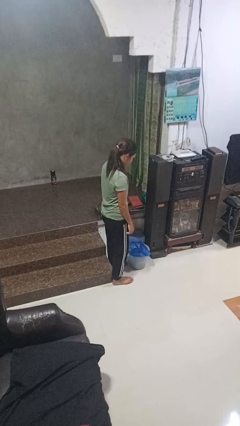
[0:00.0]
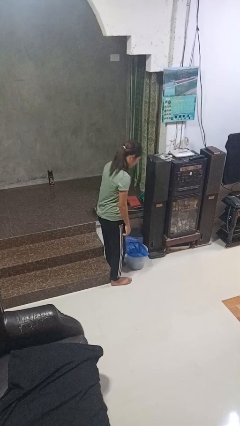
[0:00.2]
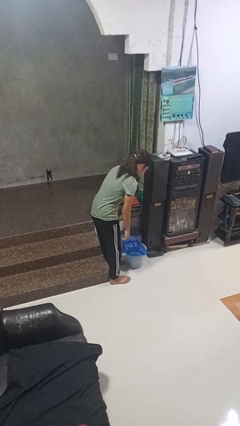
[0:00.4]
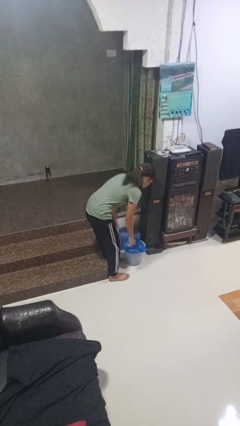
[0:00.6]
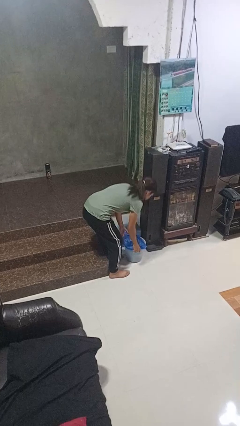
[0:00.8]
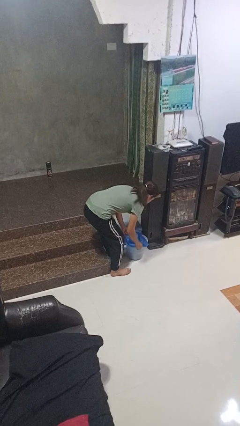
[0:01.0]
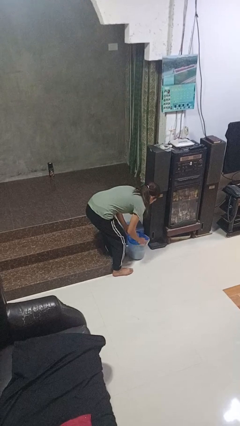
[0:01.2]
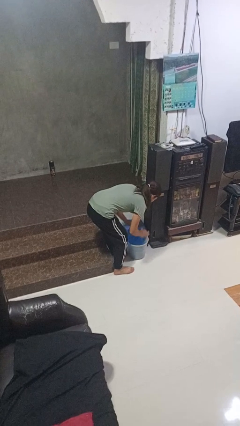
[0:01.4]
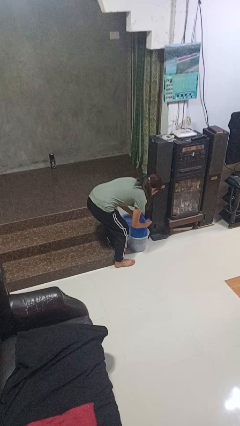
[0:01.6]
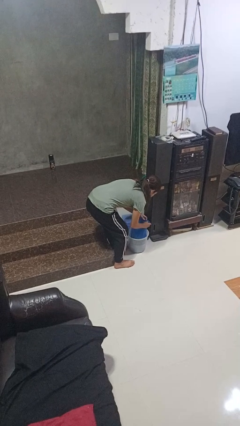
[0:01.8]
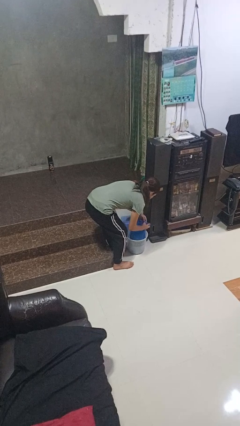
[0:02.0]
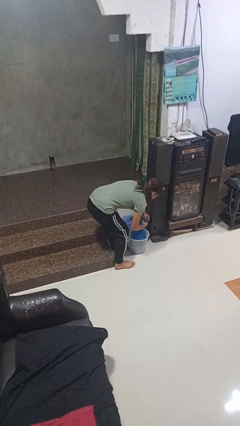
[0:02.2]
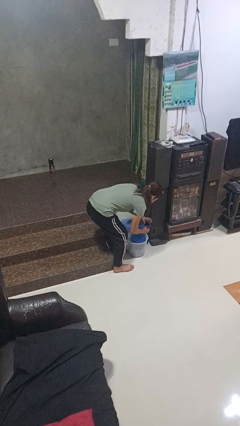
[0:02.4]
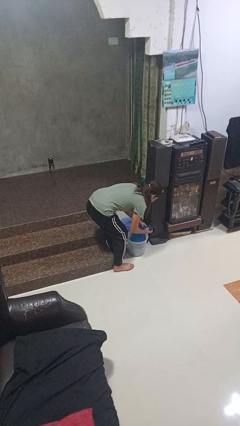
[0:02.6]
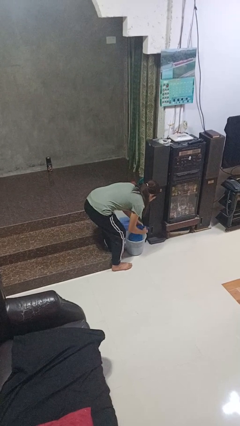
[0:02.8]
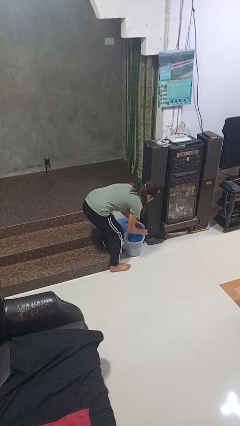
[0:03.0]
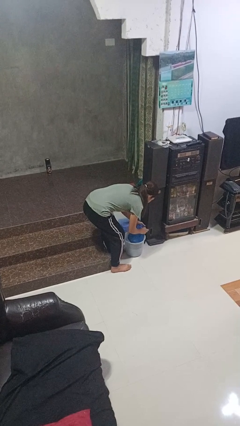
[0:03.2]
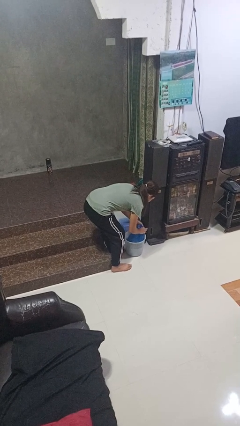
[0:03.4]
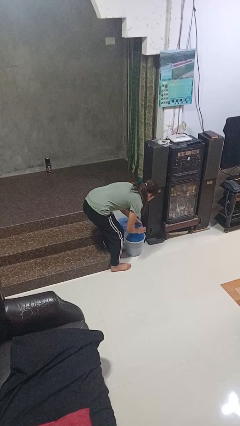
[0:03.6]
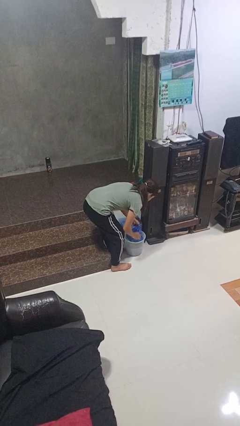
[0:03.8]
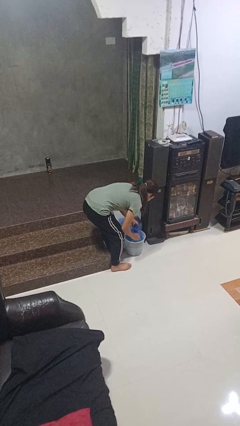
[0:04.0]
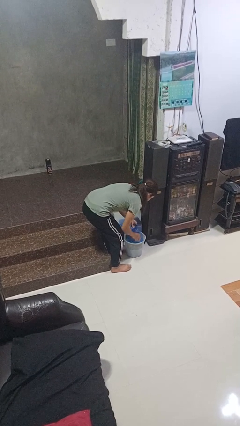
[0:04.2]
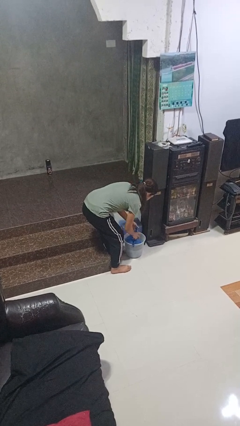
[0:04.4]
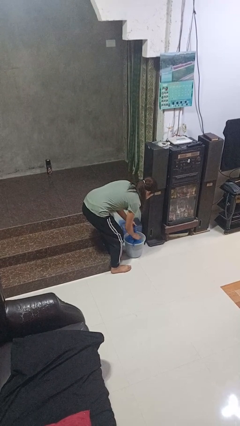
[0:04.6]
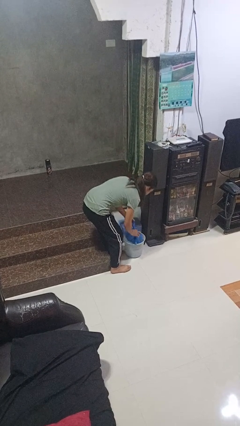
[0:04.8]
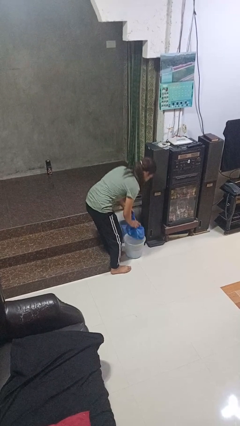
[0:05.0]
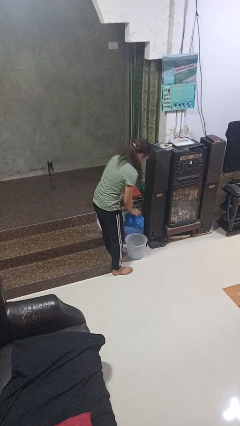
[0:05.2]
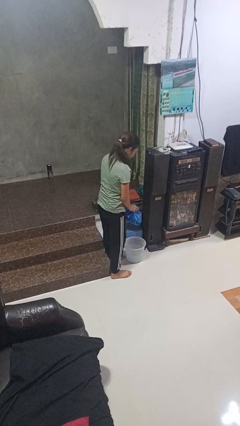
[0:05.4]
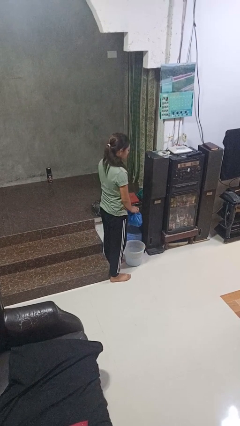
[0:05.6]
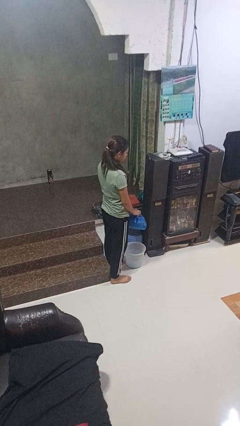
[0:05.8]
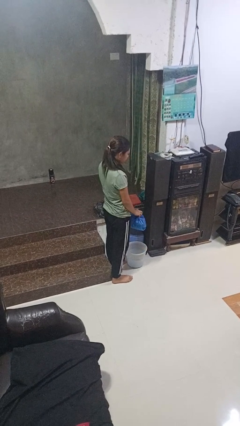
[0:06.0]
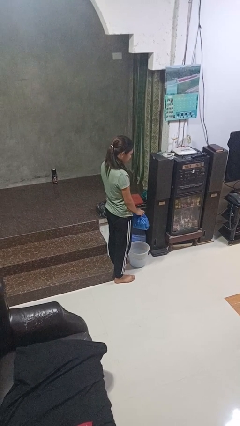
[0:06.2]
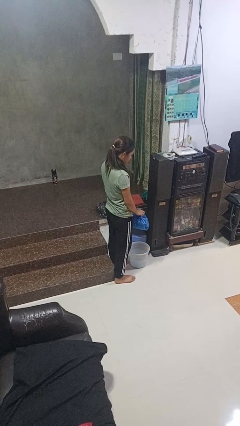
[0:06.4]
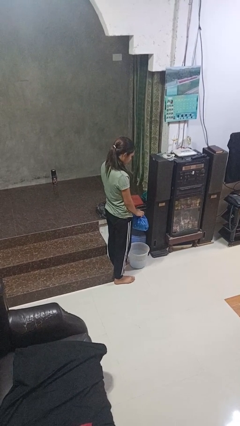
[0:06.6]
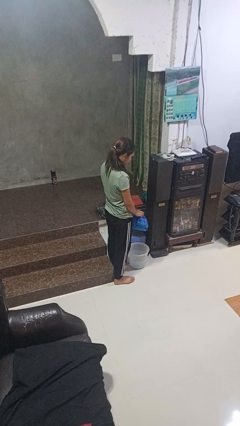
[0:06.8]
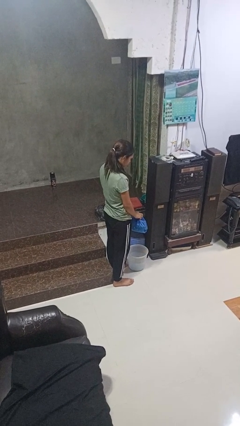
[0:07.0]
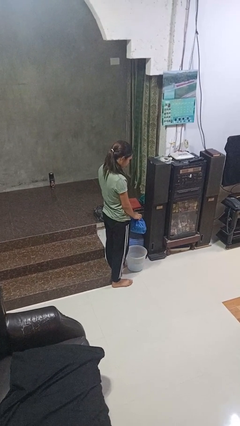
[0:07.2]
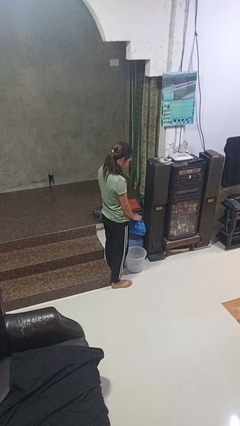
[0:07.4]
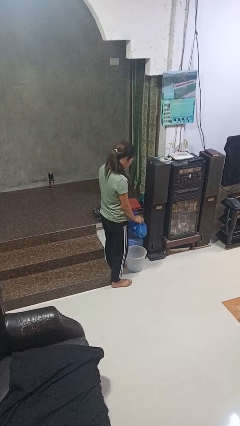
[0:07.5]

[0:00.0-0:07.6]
person removes trashbag from trashcan

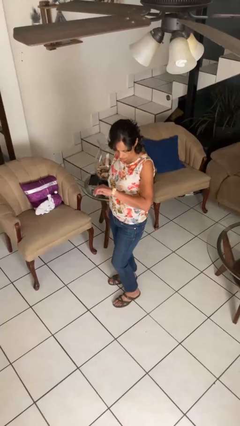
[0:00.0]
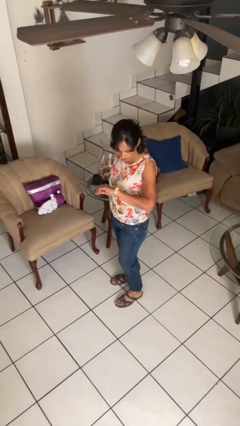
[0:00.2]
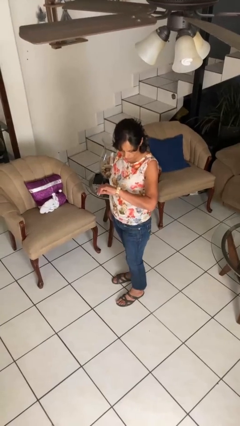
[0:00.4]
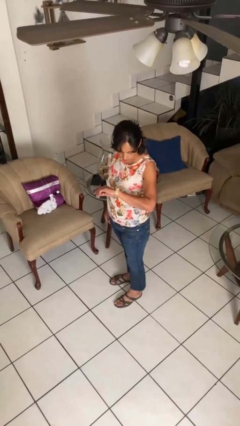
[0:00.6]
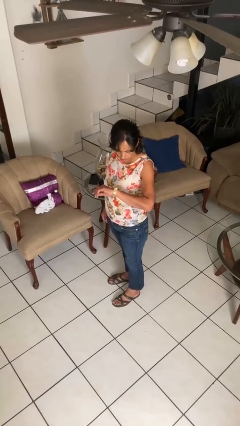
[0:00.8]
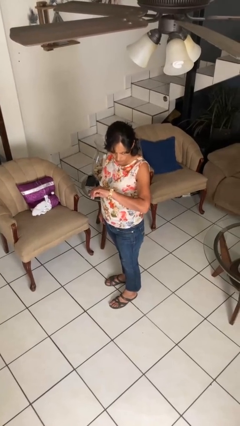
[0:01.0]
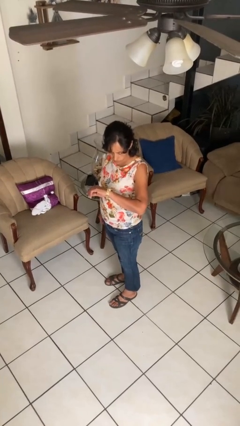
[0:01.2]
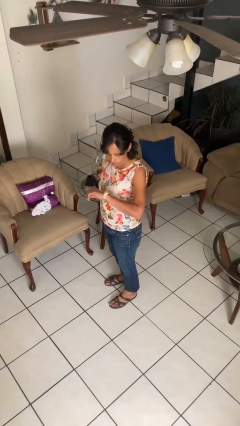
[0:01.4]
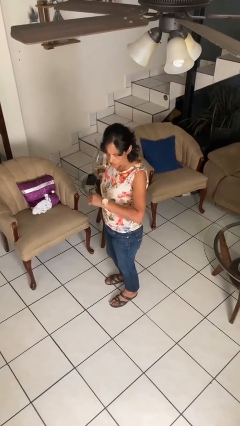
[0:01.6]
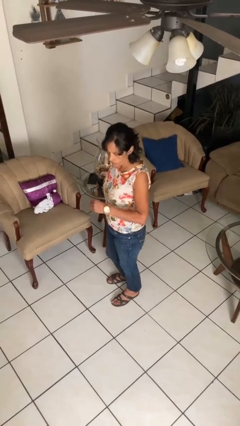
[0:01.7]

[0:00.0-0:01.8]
person looks at wristwatch

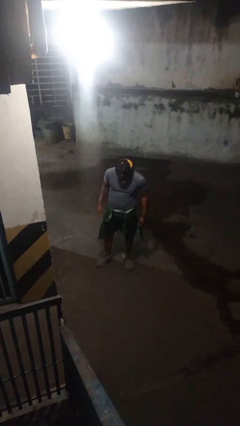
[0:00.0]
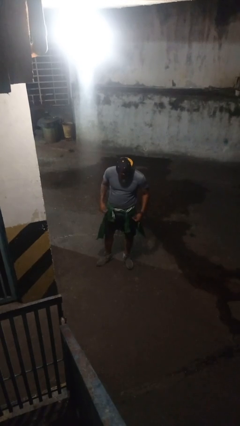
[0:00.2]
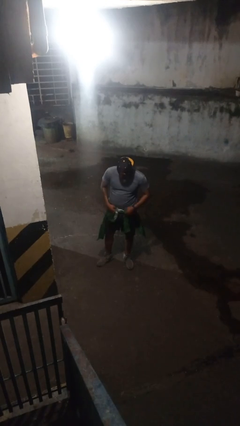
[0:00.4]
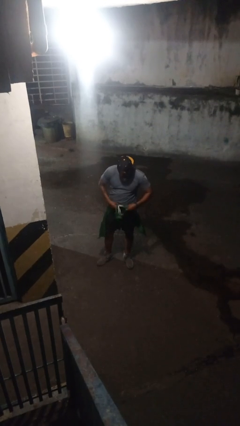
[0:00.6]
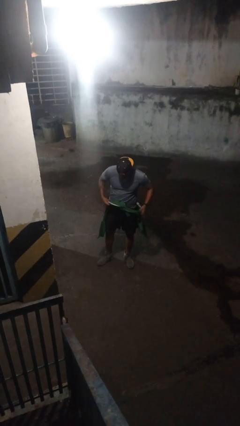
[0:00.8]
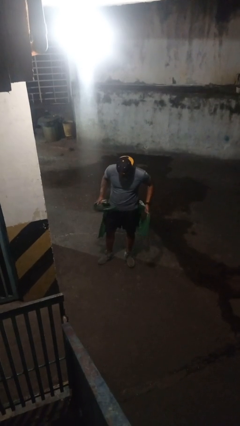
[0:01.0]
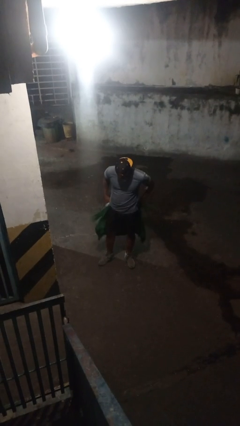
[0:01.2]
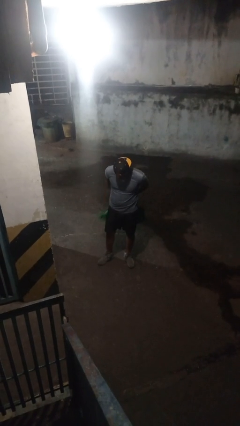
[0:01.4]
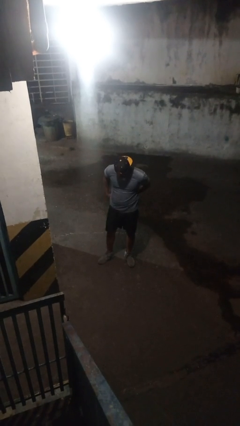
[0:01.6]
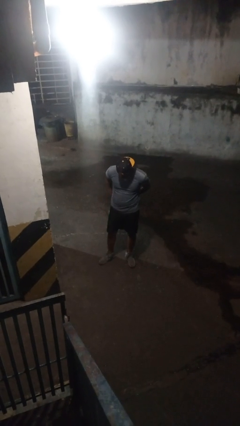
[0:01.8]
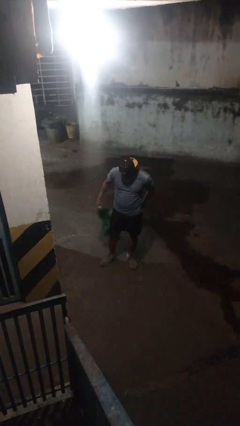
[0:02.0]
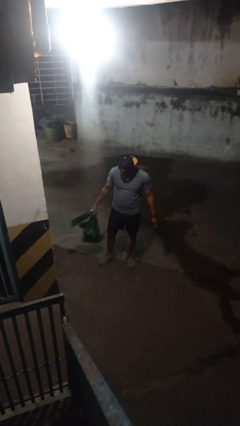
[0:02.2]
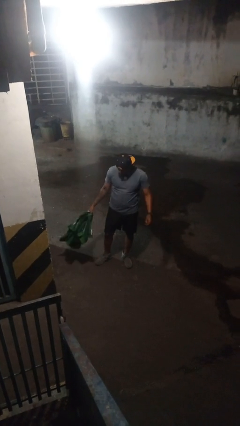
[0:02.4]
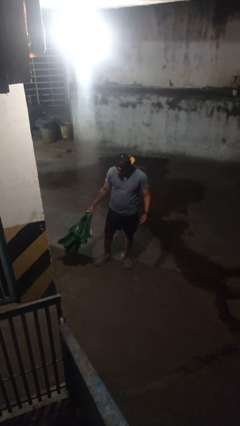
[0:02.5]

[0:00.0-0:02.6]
person unties jacket around waist

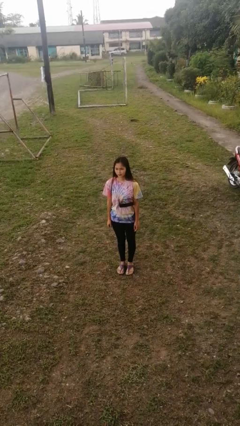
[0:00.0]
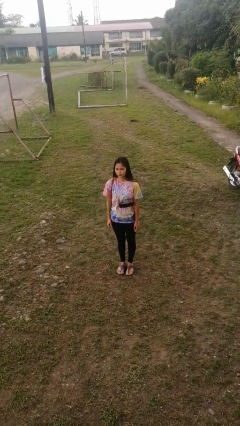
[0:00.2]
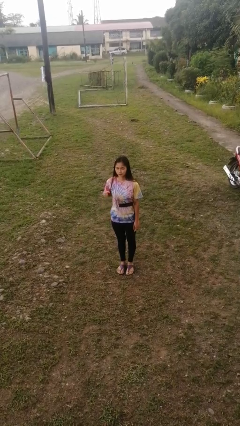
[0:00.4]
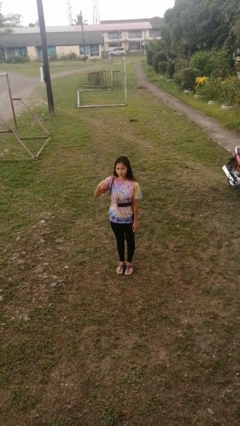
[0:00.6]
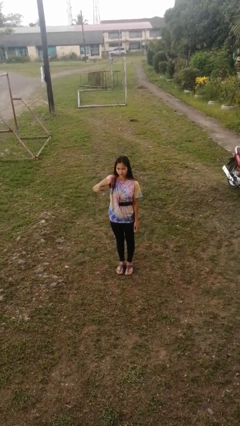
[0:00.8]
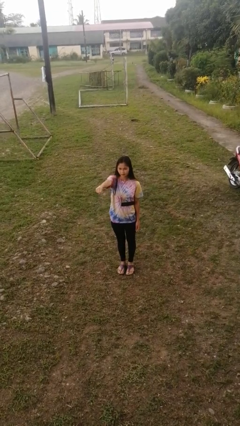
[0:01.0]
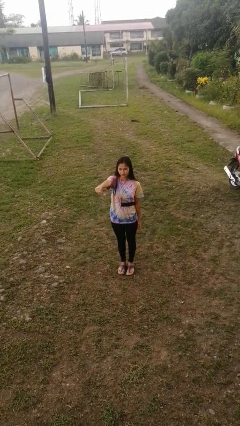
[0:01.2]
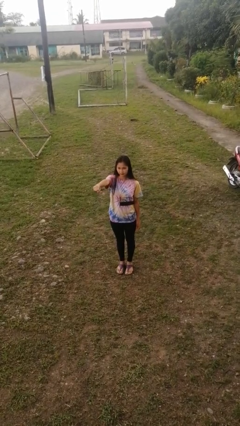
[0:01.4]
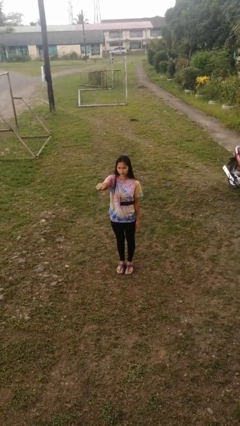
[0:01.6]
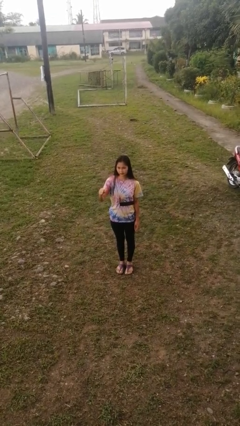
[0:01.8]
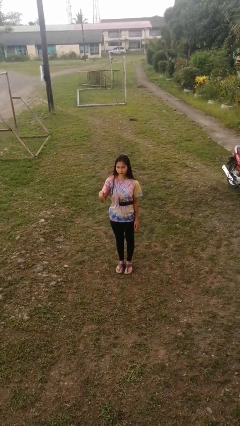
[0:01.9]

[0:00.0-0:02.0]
person punches

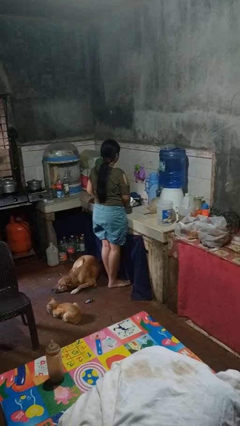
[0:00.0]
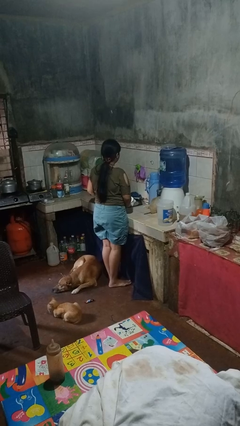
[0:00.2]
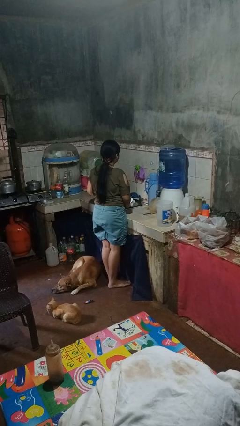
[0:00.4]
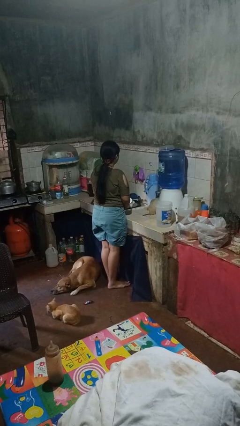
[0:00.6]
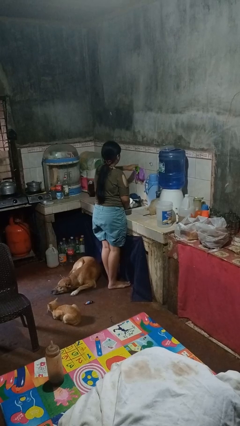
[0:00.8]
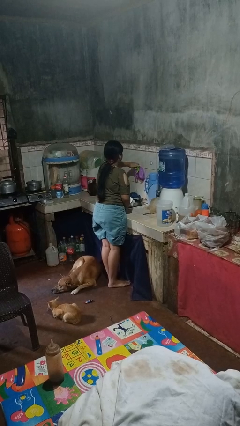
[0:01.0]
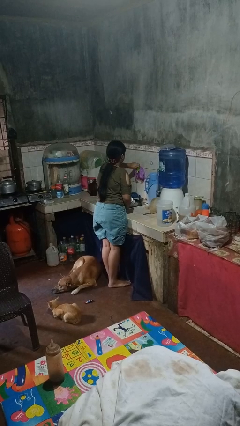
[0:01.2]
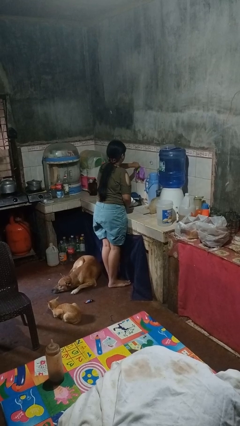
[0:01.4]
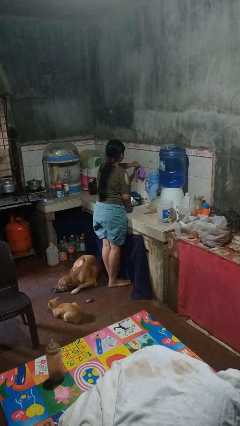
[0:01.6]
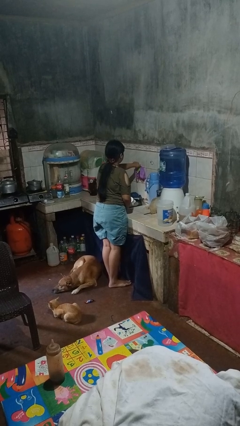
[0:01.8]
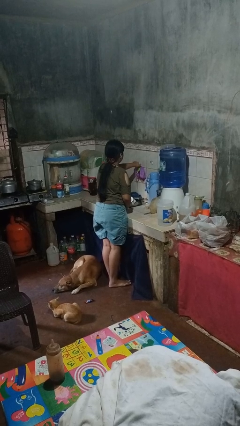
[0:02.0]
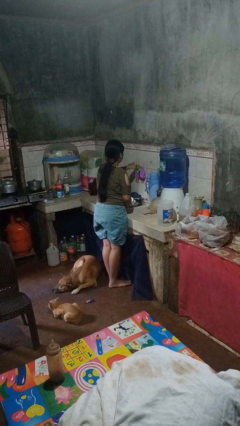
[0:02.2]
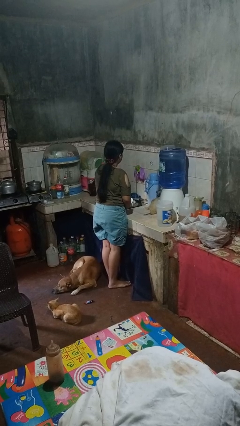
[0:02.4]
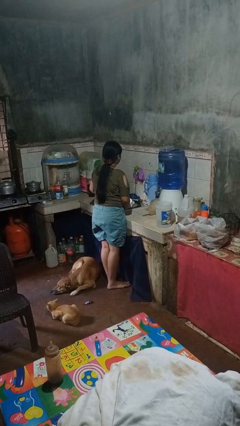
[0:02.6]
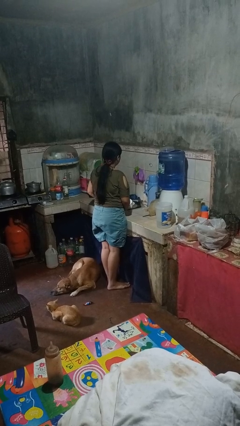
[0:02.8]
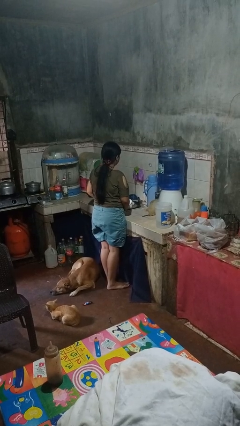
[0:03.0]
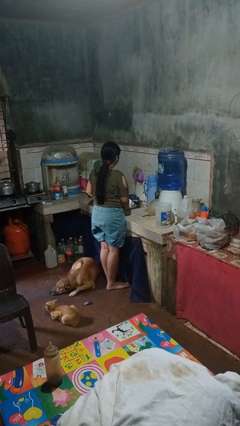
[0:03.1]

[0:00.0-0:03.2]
person turns on faucet
